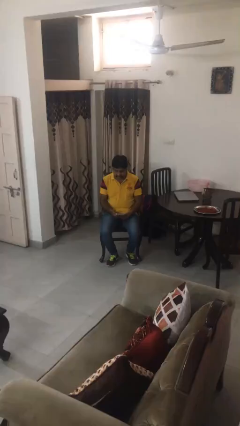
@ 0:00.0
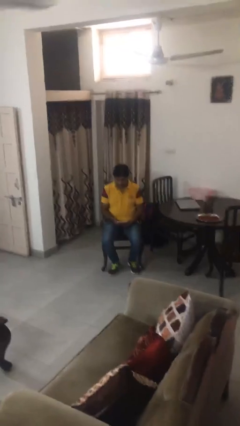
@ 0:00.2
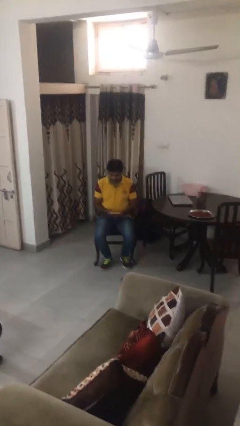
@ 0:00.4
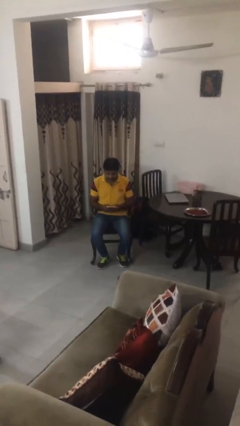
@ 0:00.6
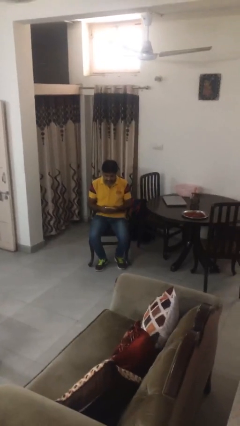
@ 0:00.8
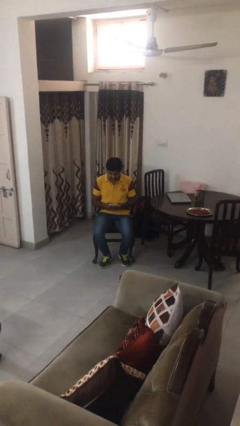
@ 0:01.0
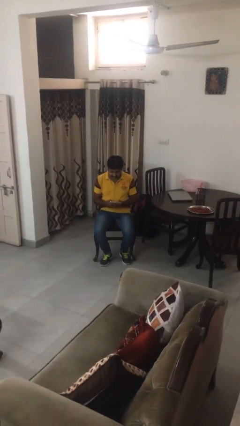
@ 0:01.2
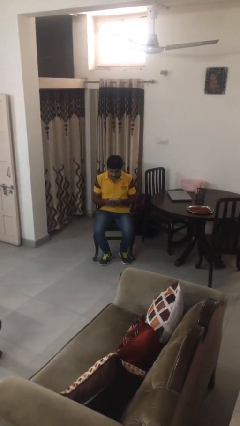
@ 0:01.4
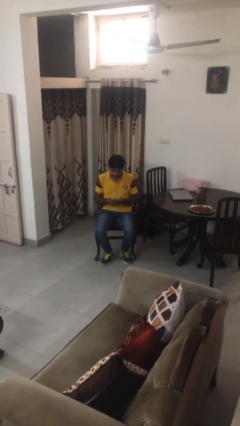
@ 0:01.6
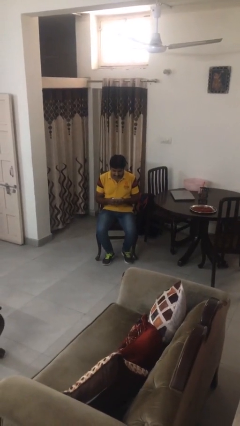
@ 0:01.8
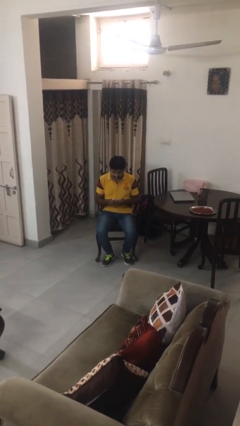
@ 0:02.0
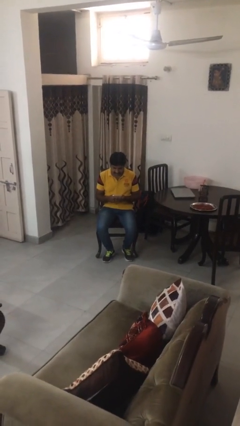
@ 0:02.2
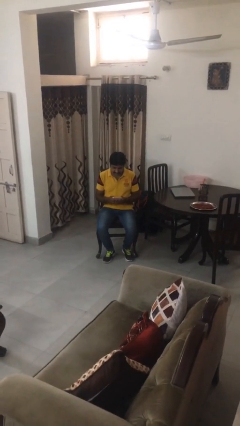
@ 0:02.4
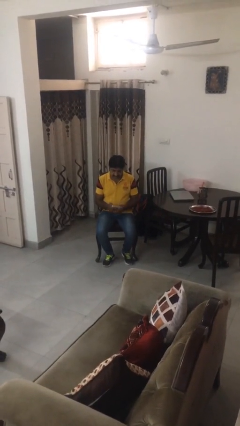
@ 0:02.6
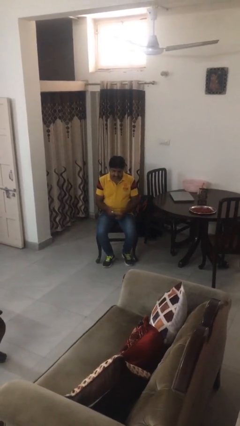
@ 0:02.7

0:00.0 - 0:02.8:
person interacts with tablet

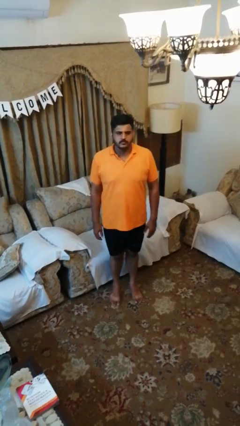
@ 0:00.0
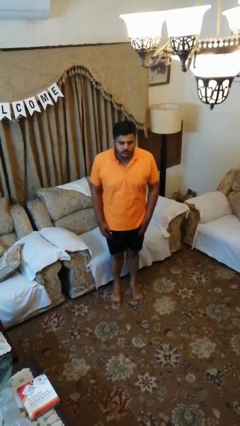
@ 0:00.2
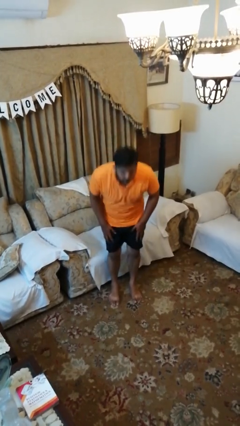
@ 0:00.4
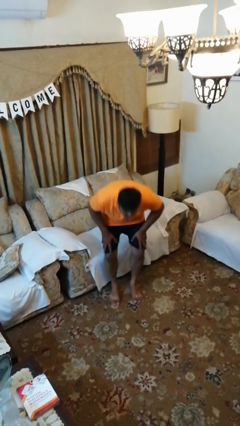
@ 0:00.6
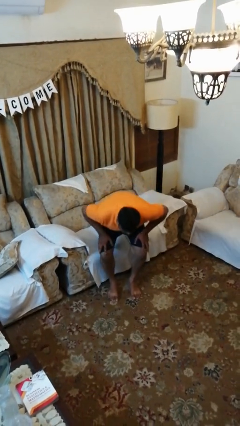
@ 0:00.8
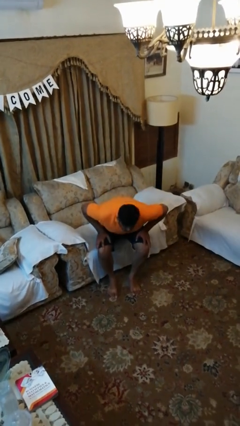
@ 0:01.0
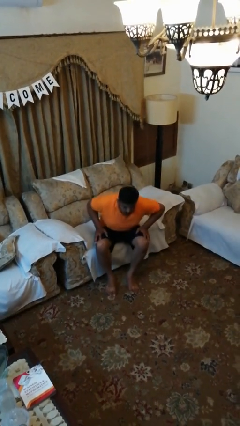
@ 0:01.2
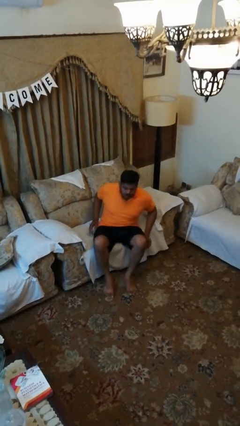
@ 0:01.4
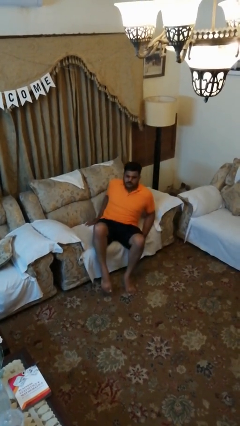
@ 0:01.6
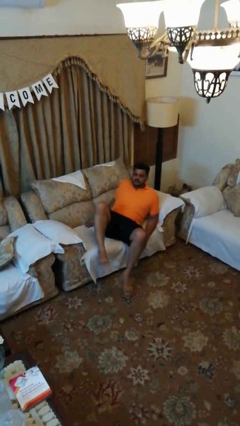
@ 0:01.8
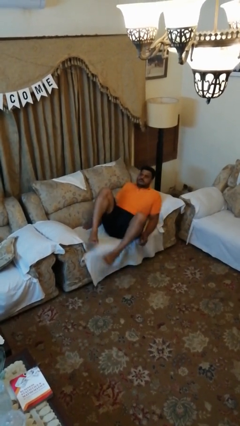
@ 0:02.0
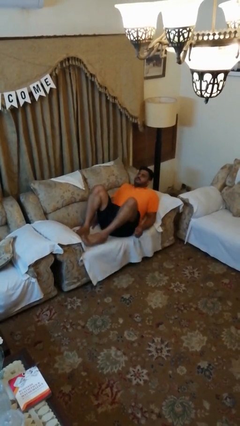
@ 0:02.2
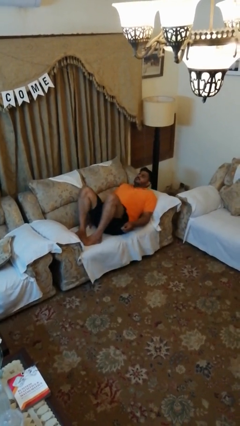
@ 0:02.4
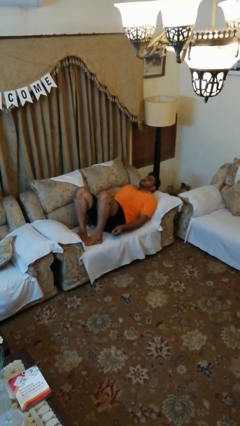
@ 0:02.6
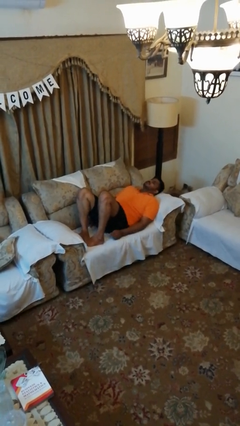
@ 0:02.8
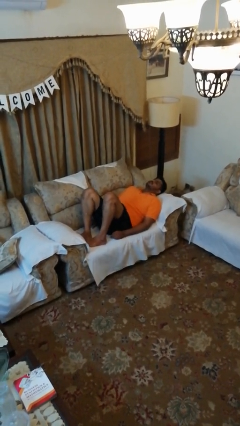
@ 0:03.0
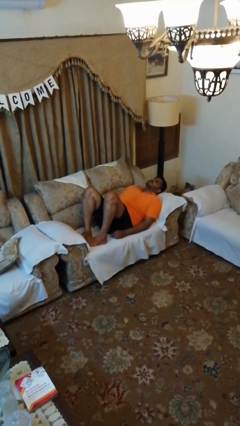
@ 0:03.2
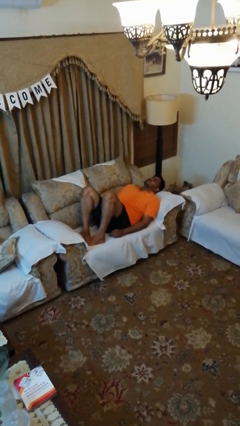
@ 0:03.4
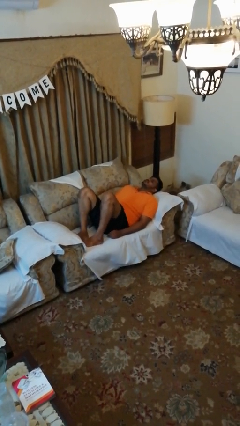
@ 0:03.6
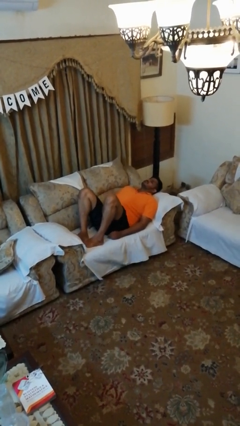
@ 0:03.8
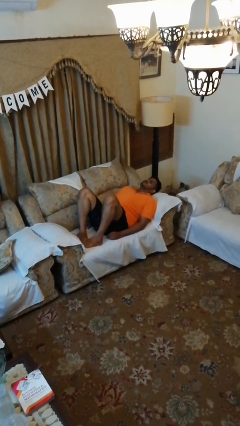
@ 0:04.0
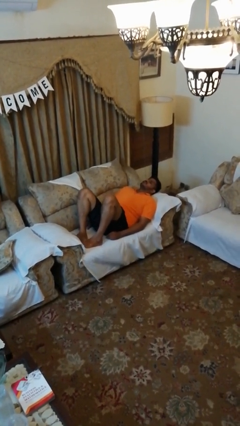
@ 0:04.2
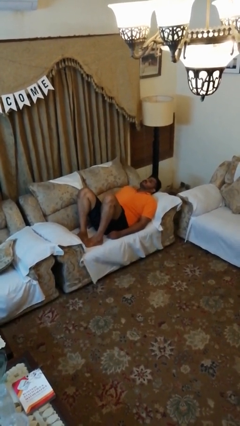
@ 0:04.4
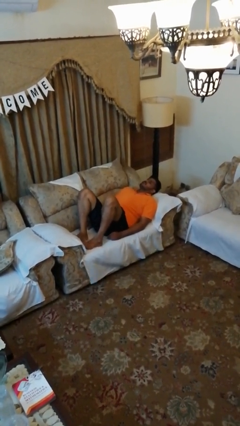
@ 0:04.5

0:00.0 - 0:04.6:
person lies down on couch

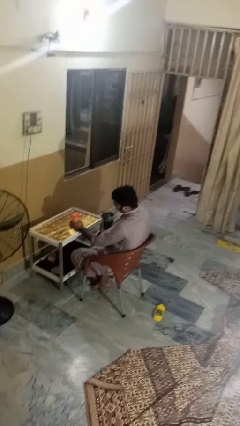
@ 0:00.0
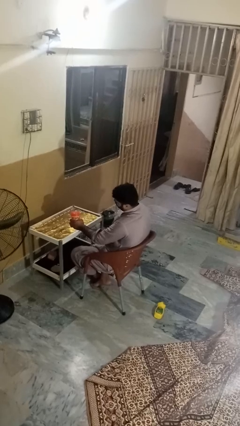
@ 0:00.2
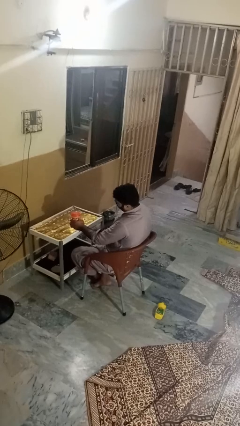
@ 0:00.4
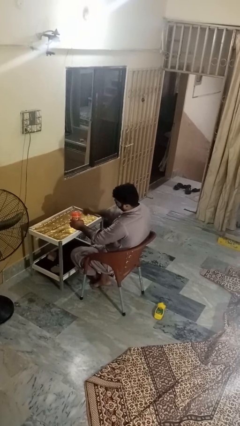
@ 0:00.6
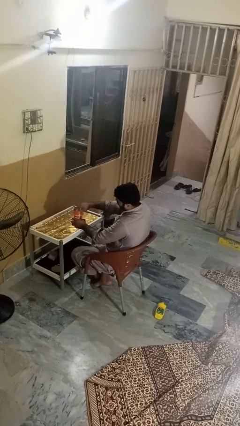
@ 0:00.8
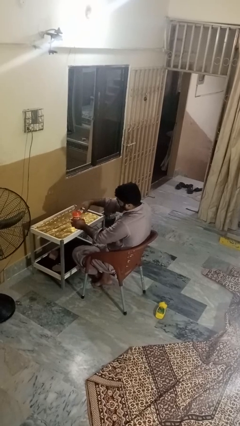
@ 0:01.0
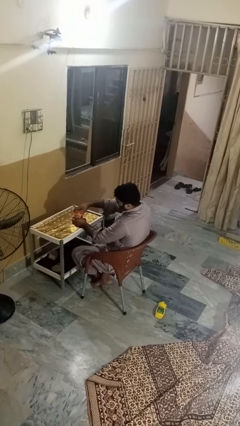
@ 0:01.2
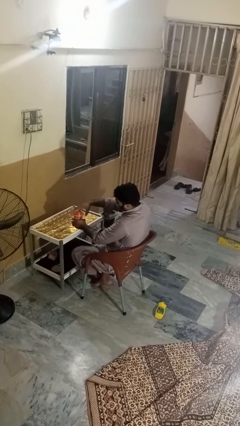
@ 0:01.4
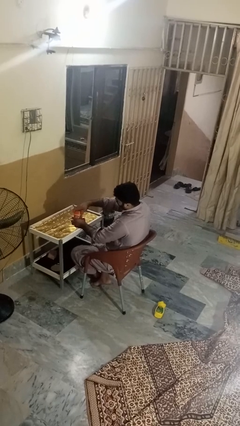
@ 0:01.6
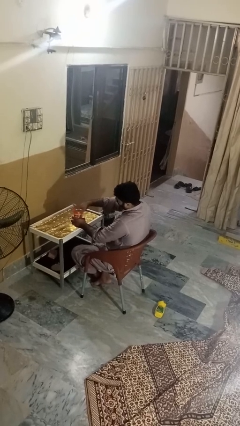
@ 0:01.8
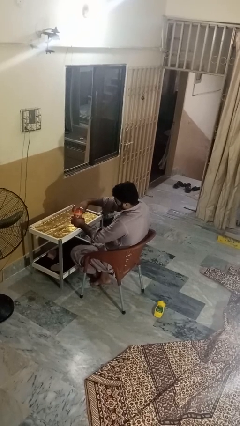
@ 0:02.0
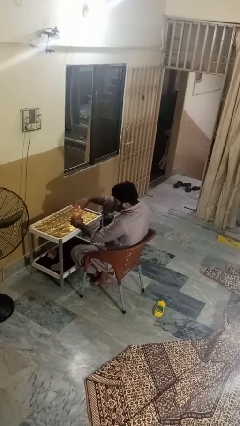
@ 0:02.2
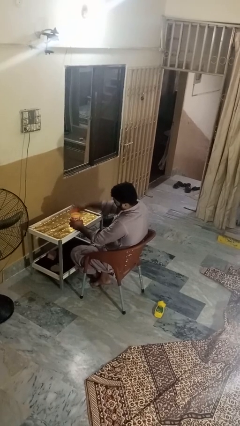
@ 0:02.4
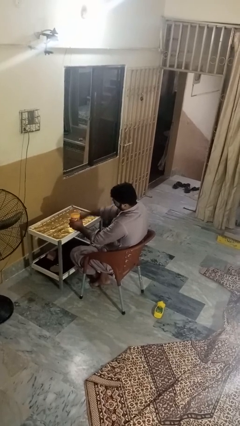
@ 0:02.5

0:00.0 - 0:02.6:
person opens jar

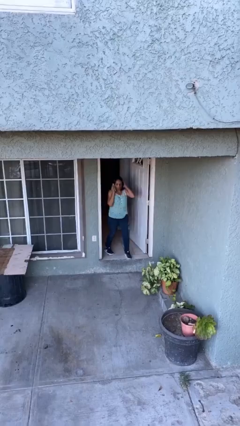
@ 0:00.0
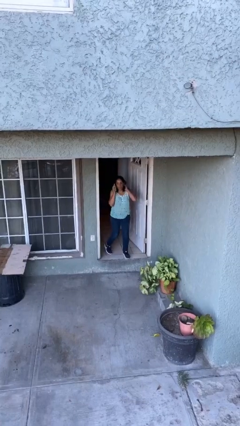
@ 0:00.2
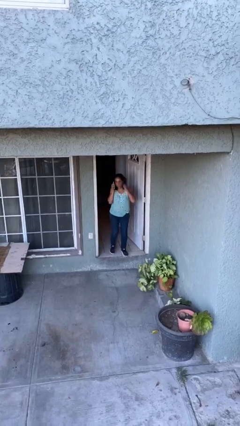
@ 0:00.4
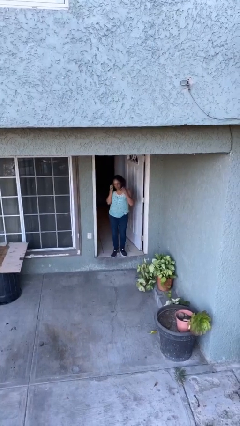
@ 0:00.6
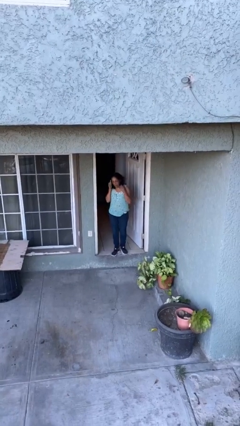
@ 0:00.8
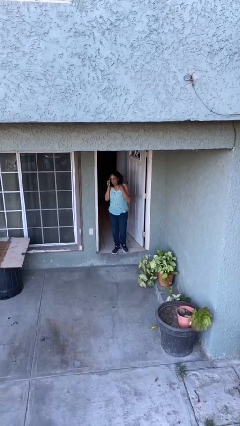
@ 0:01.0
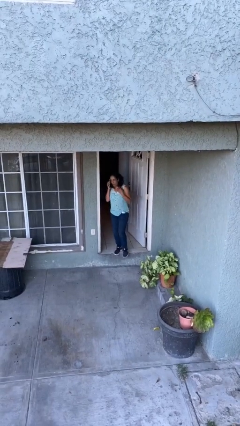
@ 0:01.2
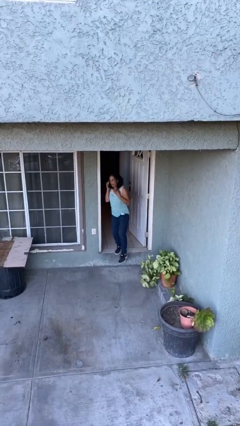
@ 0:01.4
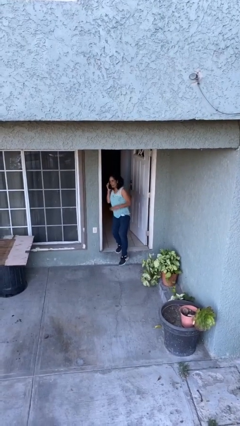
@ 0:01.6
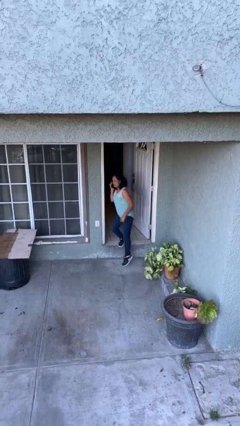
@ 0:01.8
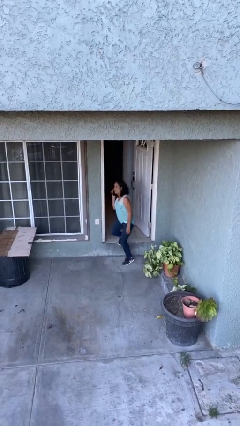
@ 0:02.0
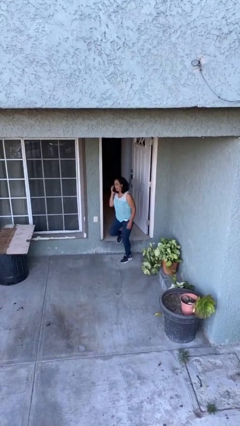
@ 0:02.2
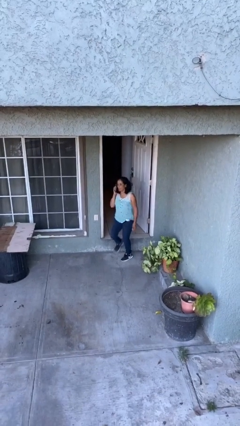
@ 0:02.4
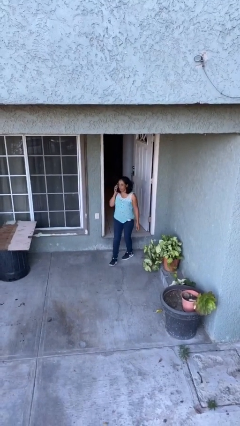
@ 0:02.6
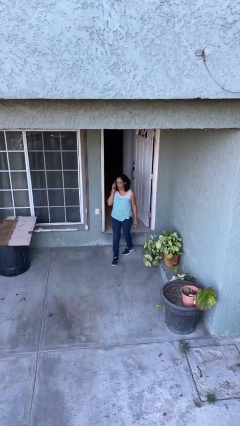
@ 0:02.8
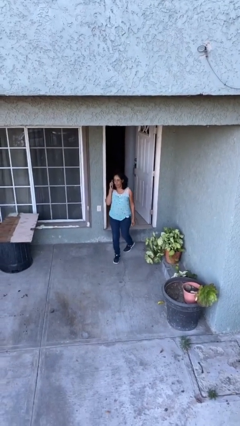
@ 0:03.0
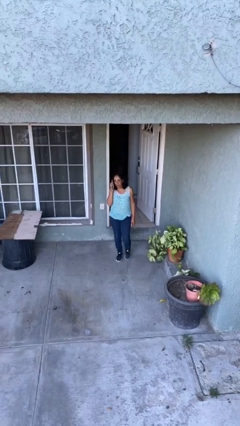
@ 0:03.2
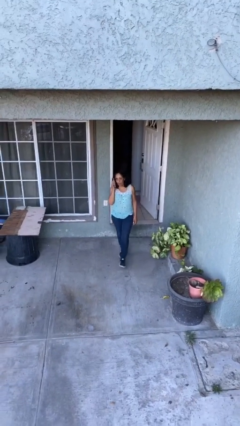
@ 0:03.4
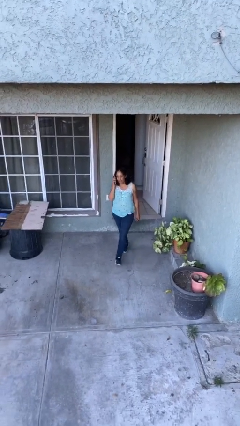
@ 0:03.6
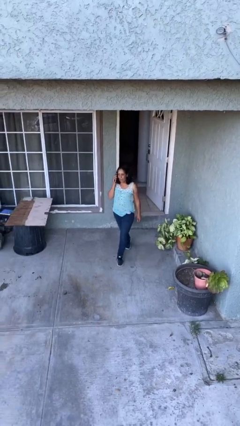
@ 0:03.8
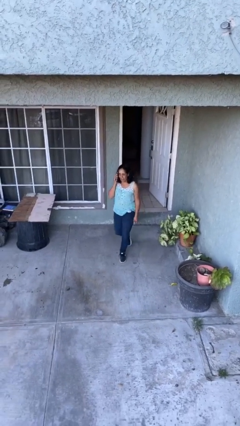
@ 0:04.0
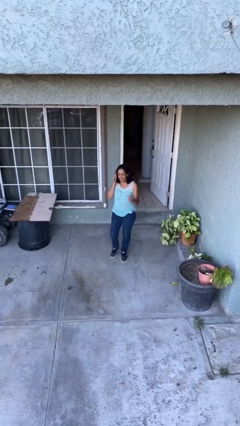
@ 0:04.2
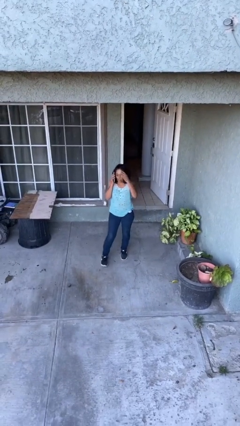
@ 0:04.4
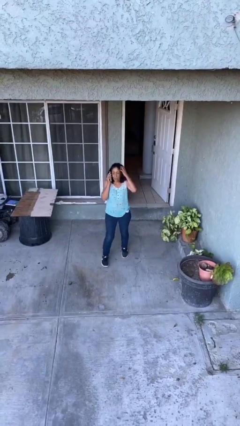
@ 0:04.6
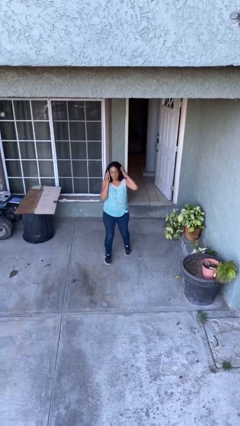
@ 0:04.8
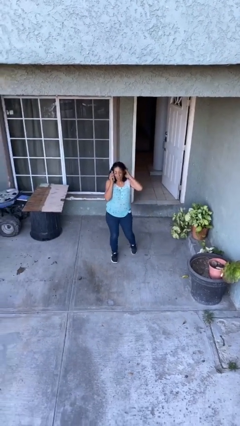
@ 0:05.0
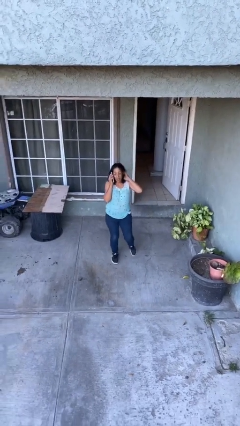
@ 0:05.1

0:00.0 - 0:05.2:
person enters scene through structure

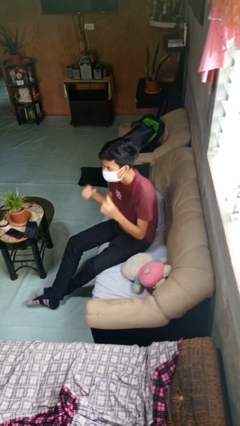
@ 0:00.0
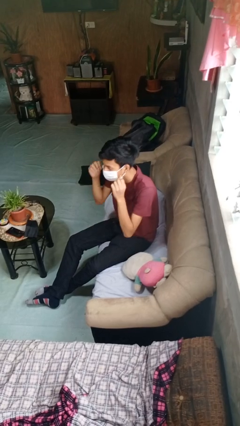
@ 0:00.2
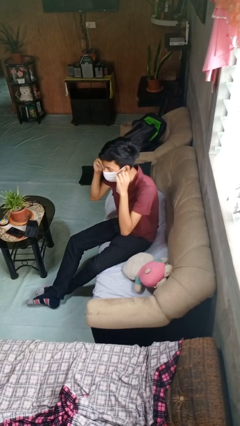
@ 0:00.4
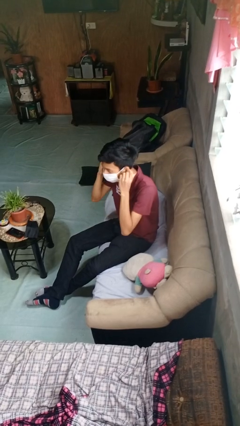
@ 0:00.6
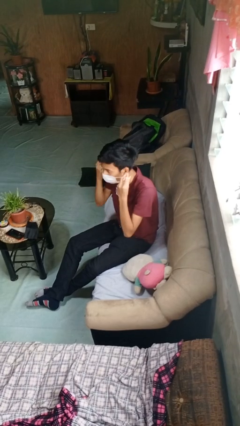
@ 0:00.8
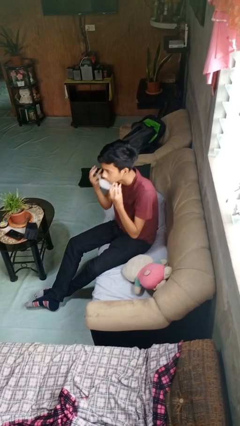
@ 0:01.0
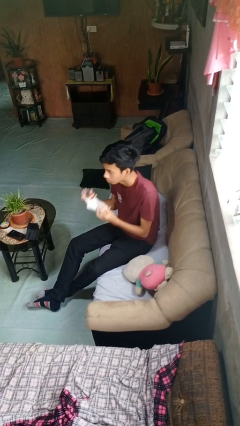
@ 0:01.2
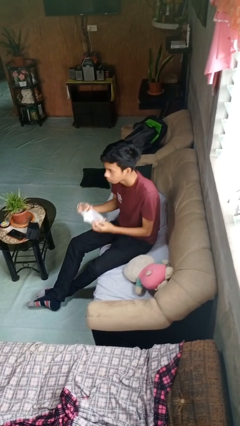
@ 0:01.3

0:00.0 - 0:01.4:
person takes off facemask

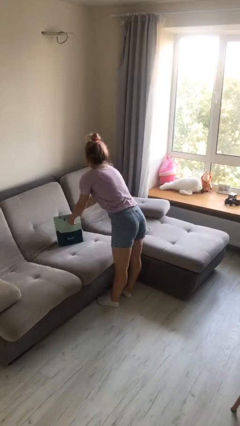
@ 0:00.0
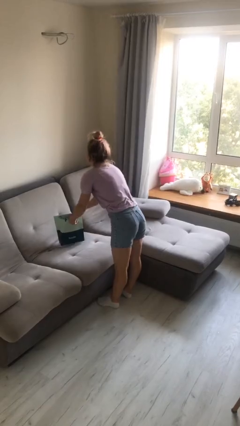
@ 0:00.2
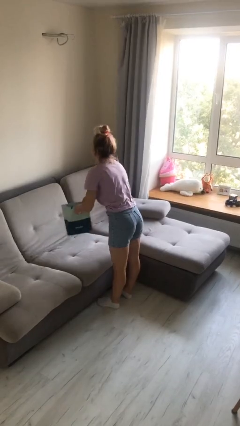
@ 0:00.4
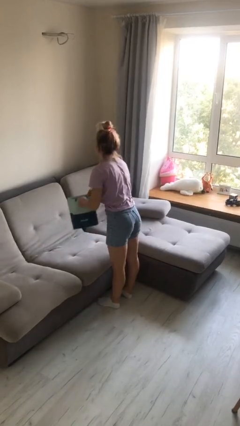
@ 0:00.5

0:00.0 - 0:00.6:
person picks up object from couch

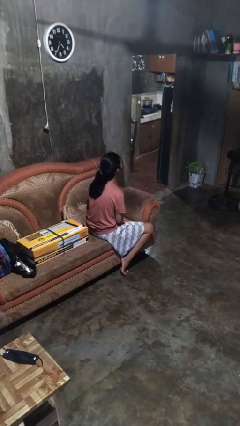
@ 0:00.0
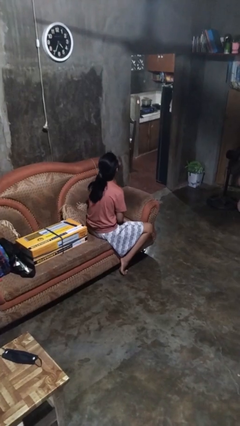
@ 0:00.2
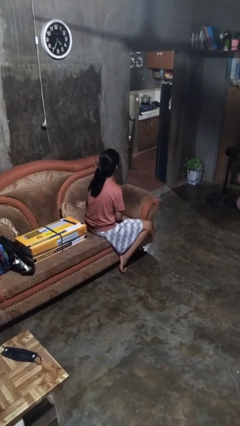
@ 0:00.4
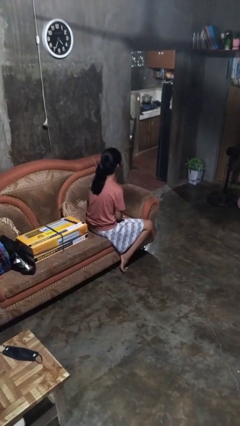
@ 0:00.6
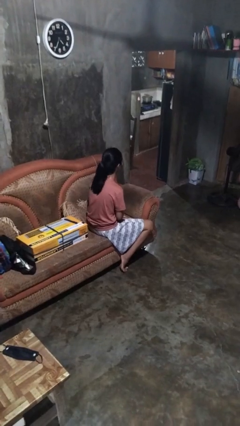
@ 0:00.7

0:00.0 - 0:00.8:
person nods head
